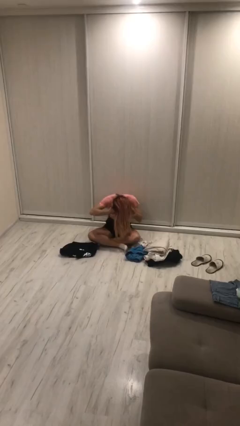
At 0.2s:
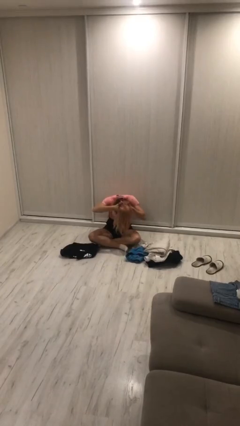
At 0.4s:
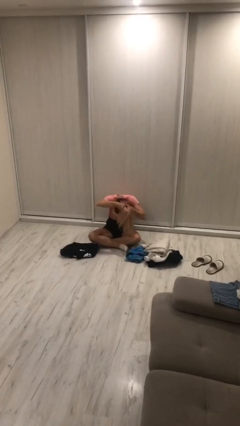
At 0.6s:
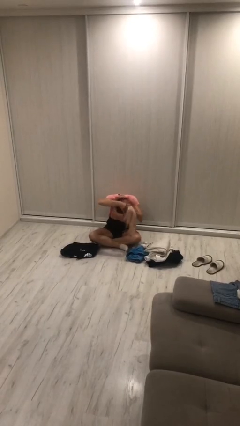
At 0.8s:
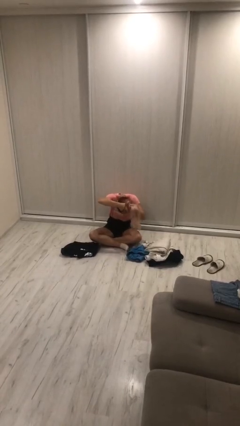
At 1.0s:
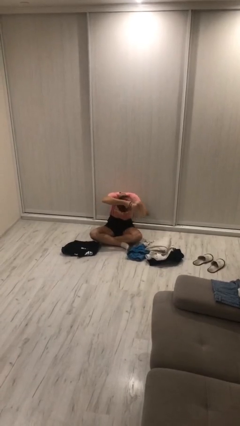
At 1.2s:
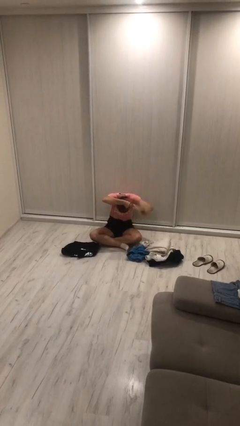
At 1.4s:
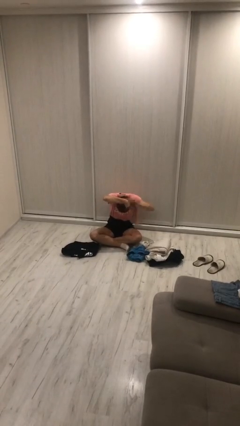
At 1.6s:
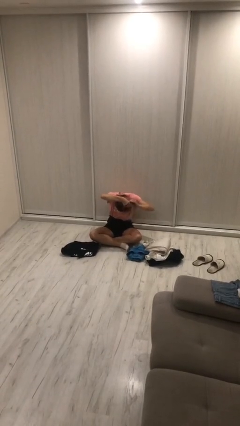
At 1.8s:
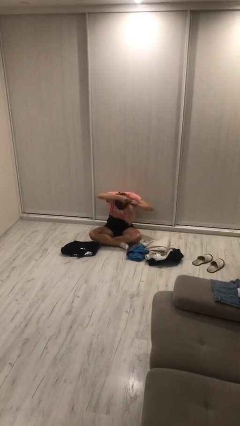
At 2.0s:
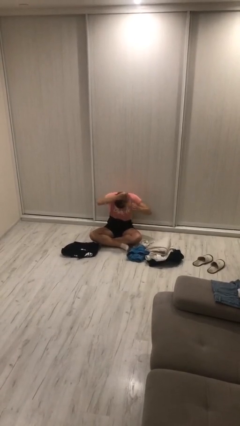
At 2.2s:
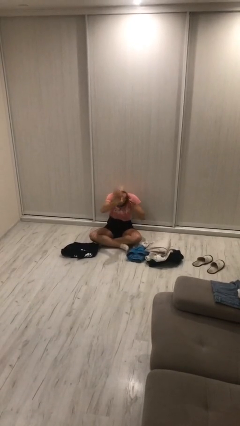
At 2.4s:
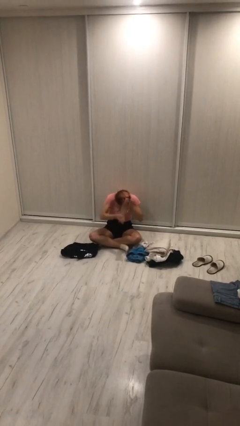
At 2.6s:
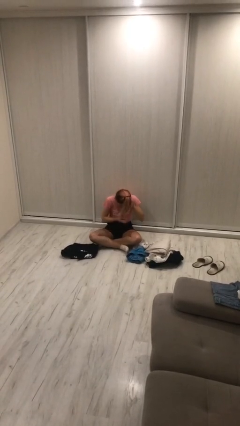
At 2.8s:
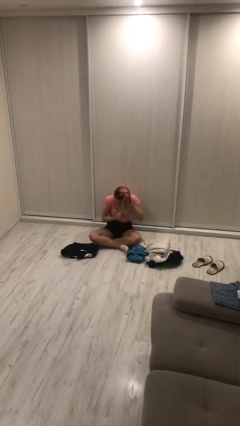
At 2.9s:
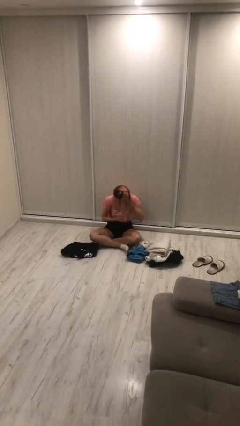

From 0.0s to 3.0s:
person puts hair in ponytail

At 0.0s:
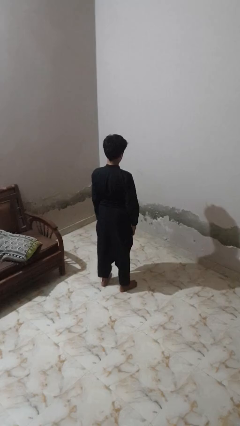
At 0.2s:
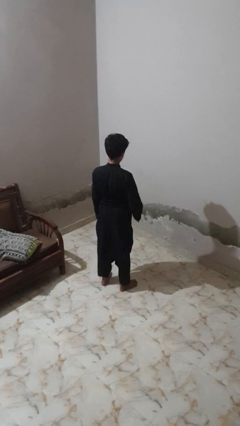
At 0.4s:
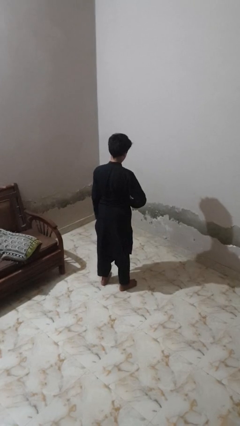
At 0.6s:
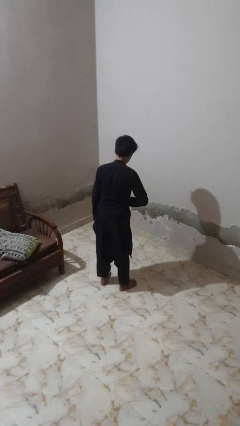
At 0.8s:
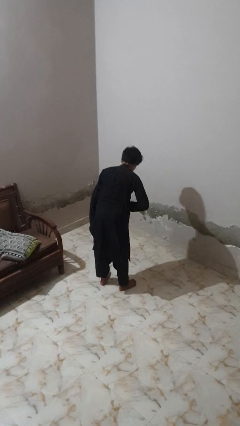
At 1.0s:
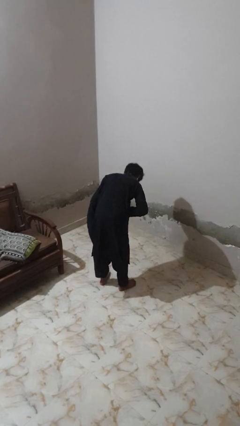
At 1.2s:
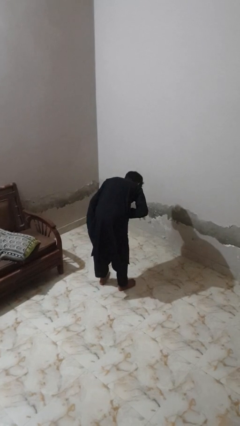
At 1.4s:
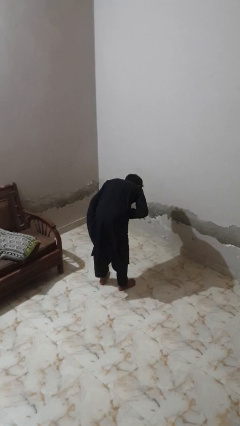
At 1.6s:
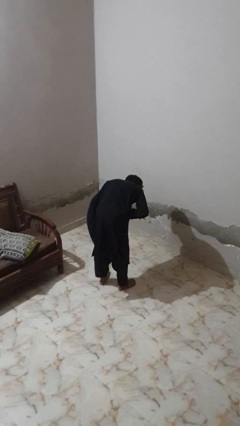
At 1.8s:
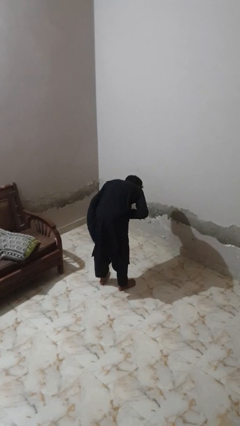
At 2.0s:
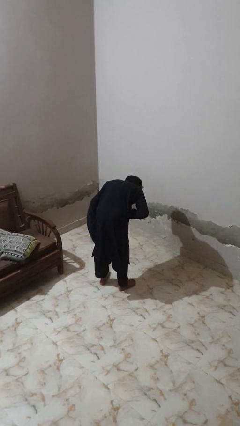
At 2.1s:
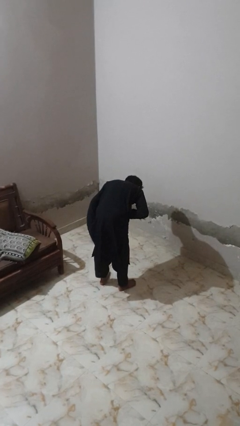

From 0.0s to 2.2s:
person bows

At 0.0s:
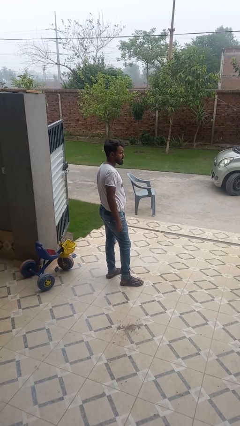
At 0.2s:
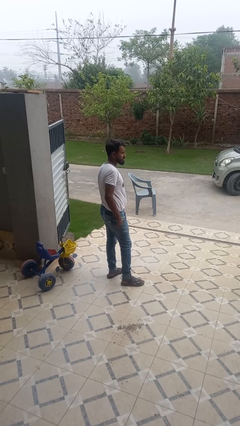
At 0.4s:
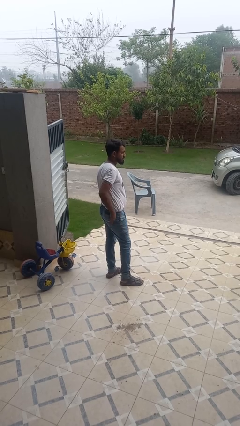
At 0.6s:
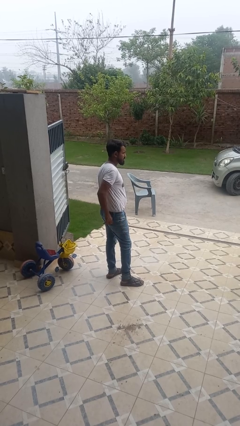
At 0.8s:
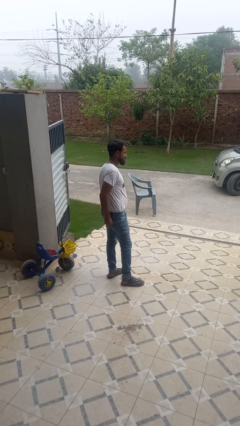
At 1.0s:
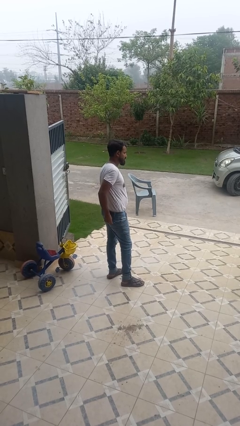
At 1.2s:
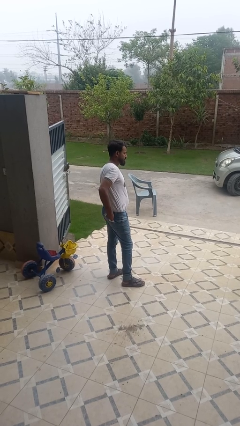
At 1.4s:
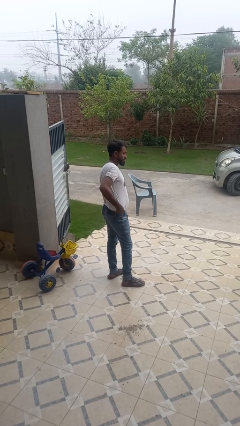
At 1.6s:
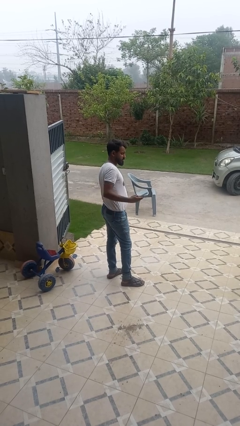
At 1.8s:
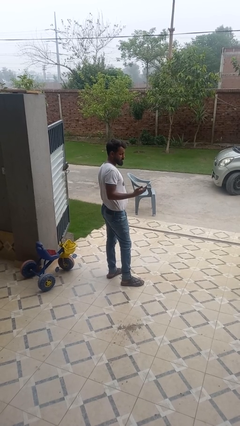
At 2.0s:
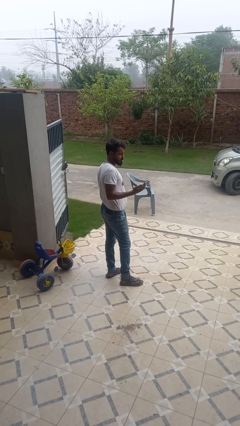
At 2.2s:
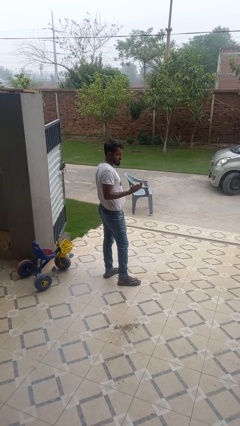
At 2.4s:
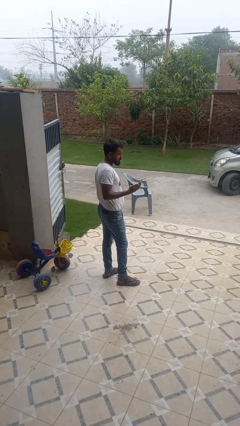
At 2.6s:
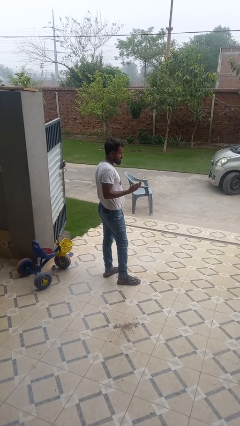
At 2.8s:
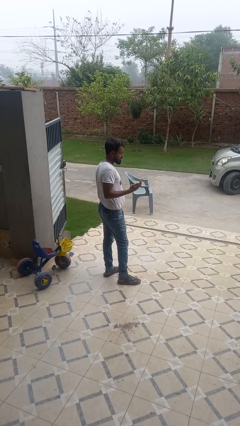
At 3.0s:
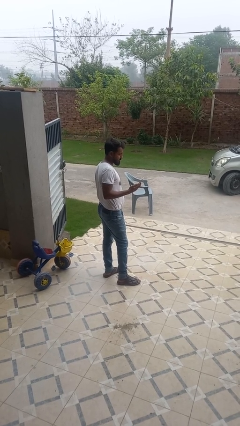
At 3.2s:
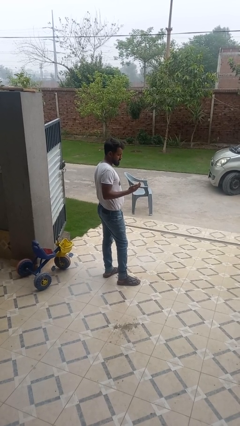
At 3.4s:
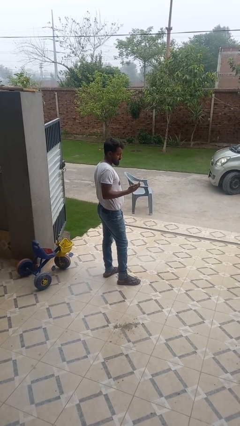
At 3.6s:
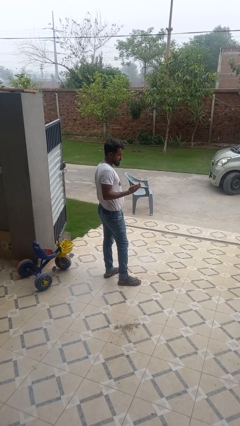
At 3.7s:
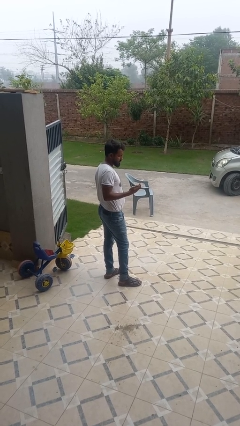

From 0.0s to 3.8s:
person takes phone from pocket

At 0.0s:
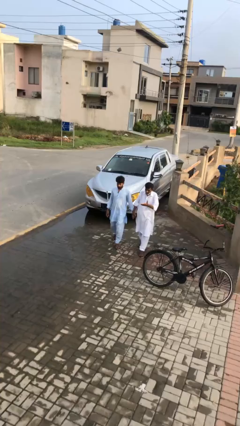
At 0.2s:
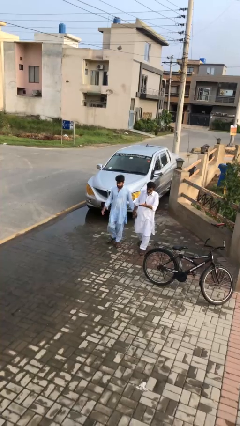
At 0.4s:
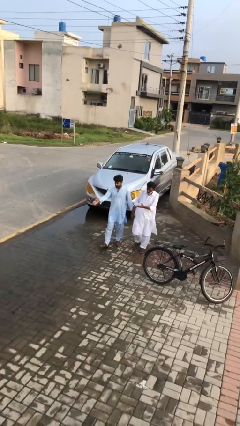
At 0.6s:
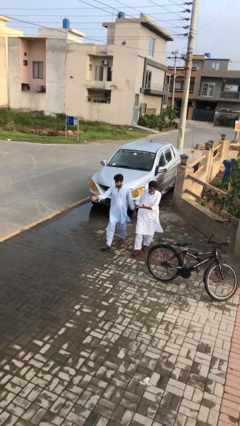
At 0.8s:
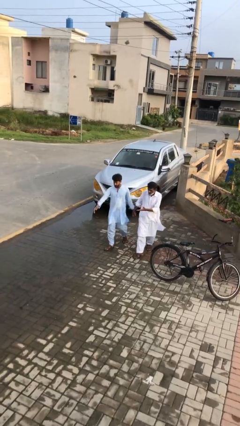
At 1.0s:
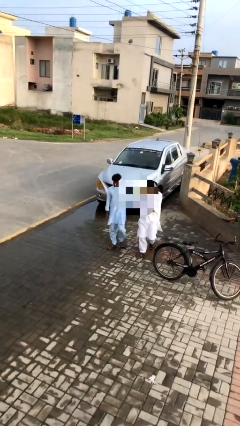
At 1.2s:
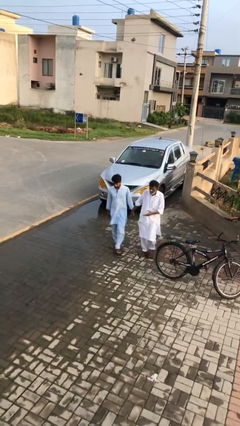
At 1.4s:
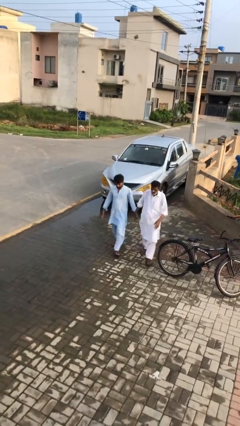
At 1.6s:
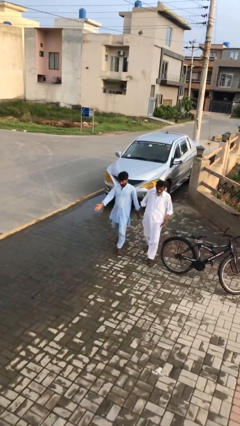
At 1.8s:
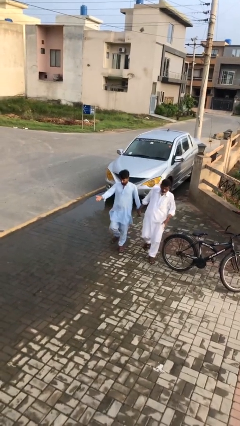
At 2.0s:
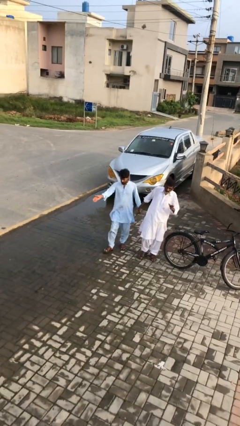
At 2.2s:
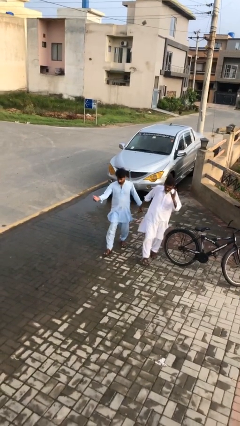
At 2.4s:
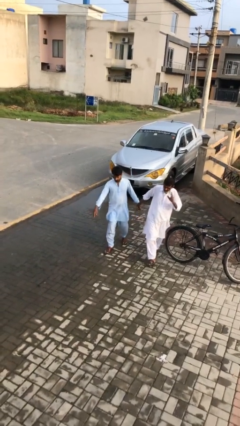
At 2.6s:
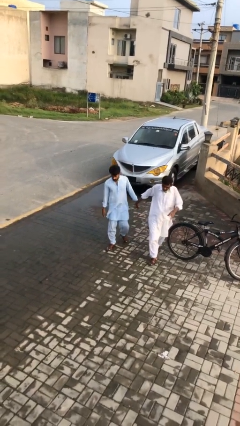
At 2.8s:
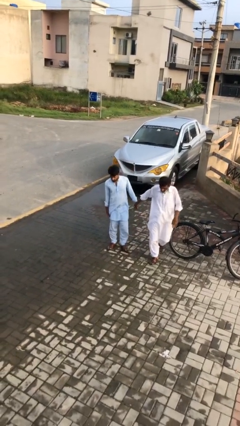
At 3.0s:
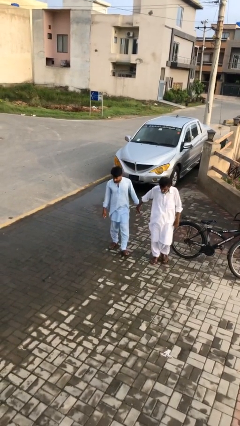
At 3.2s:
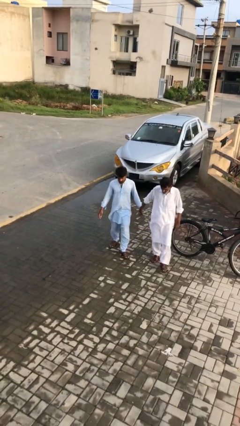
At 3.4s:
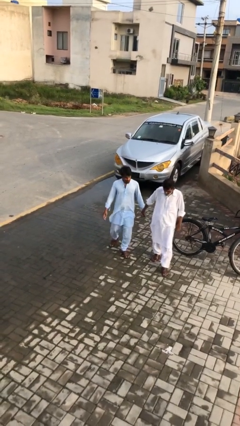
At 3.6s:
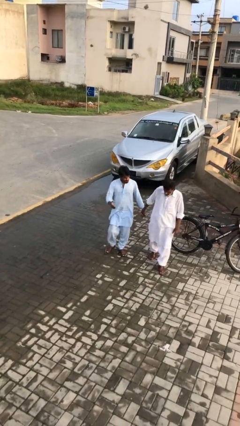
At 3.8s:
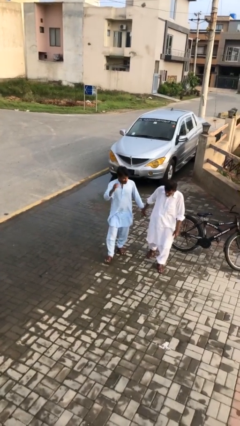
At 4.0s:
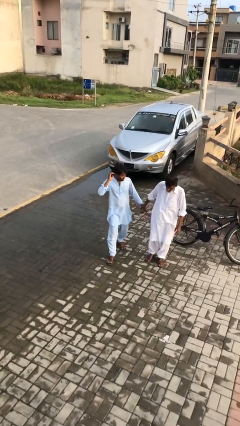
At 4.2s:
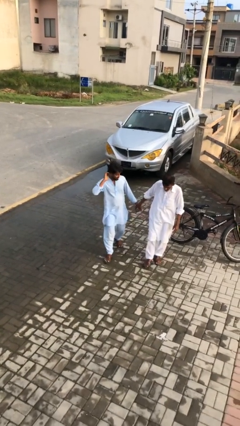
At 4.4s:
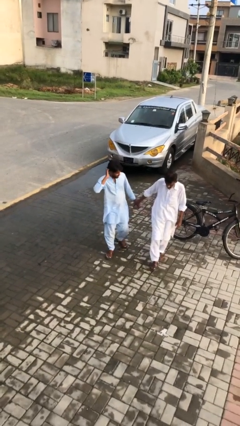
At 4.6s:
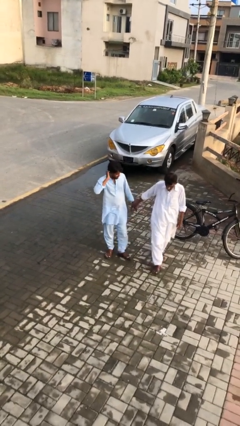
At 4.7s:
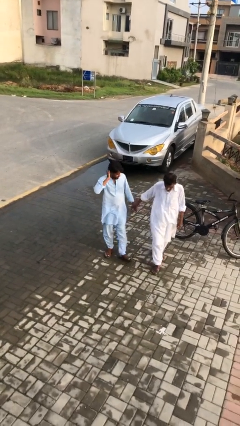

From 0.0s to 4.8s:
person holds hand

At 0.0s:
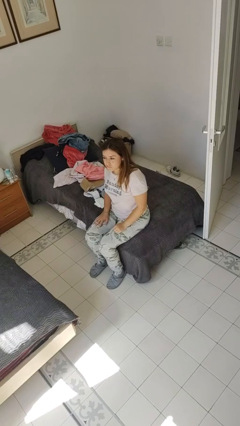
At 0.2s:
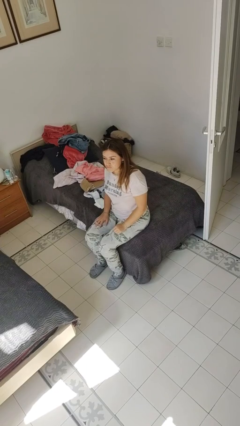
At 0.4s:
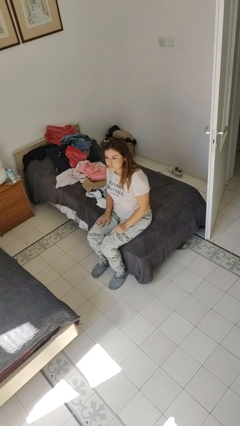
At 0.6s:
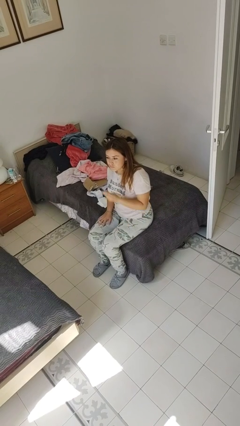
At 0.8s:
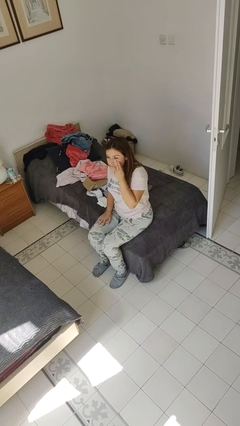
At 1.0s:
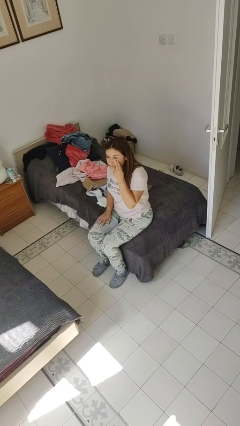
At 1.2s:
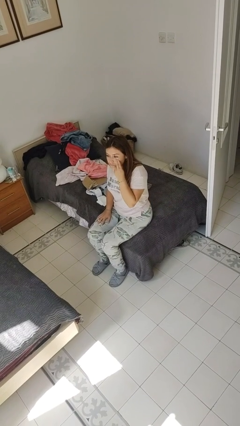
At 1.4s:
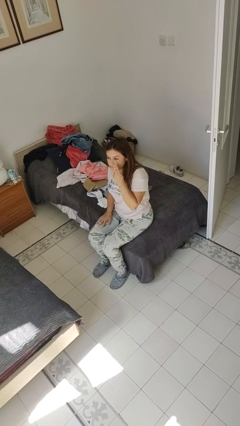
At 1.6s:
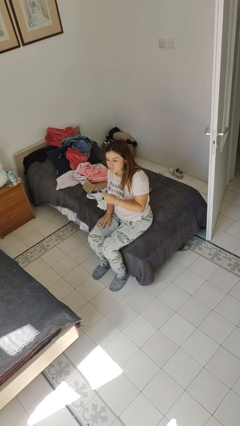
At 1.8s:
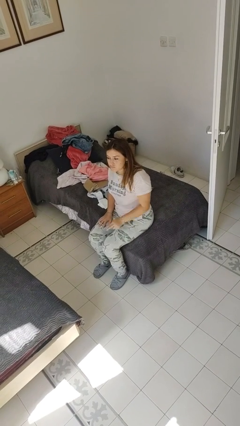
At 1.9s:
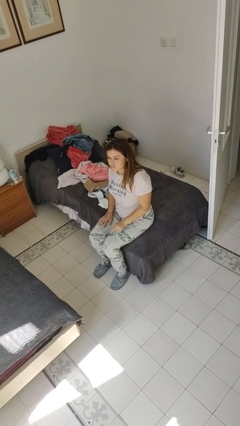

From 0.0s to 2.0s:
person gestures watch closely

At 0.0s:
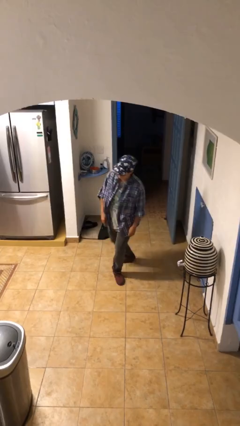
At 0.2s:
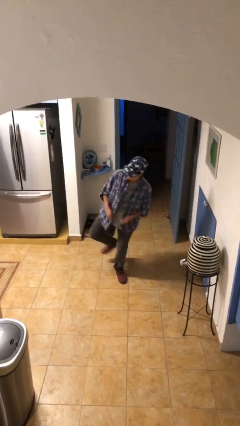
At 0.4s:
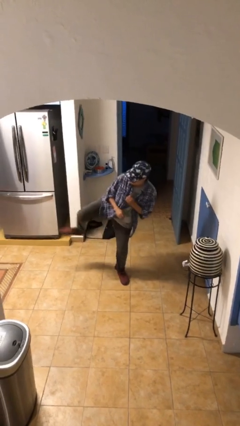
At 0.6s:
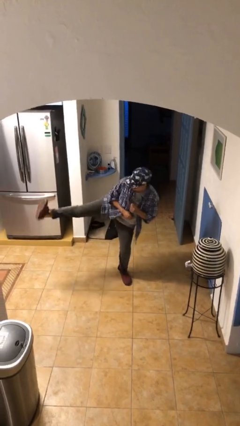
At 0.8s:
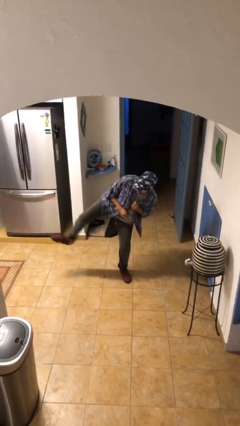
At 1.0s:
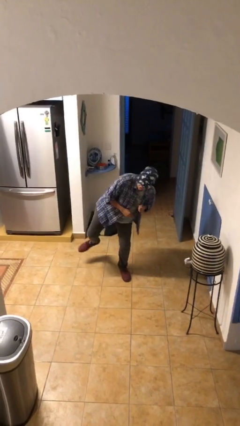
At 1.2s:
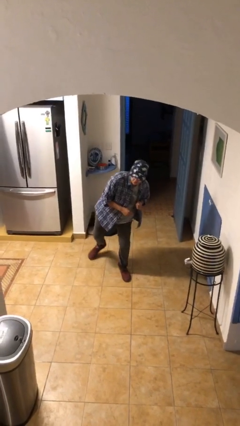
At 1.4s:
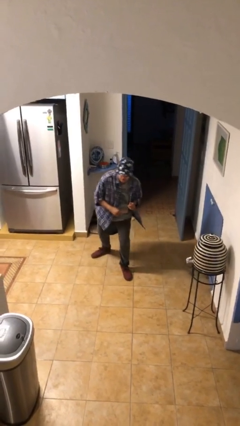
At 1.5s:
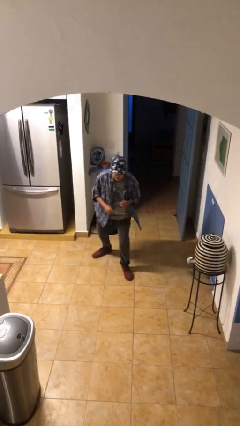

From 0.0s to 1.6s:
person karate kicks
